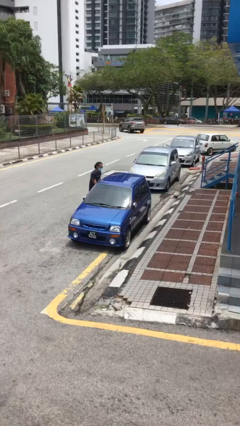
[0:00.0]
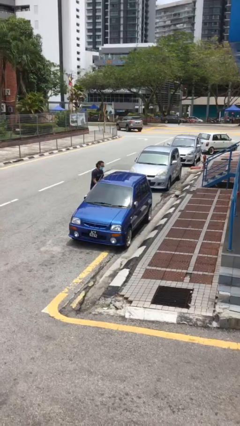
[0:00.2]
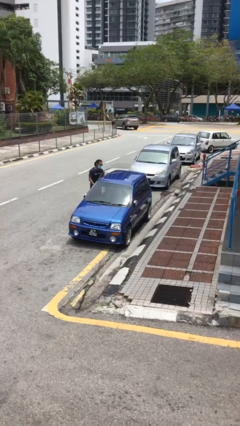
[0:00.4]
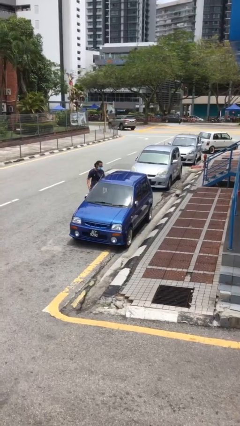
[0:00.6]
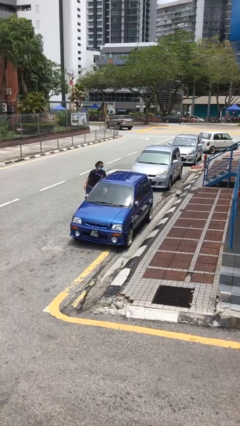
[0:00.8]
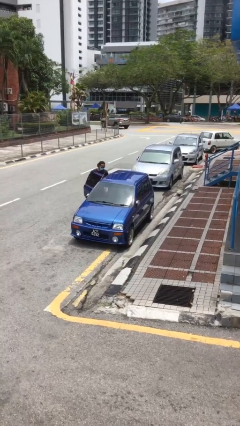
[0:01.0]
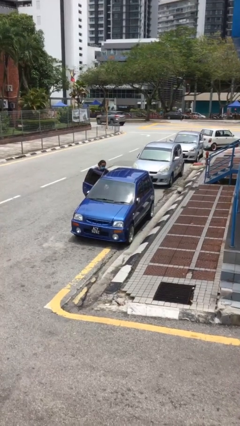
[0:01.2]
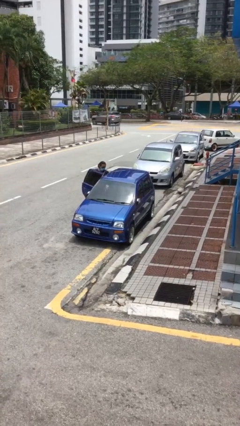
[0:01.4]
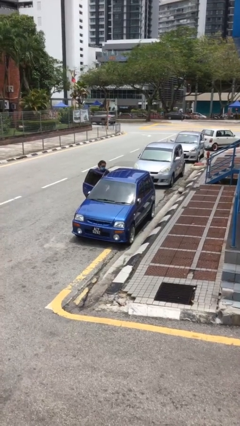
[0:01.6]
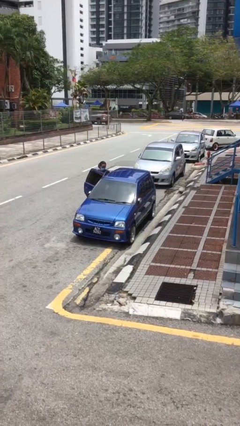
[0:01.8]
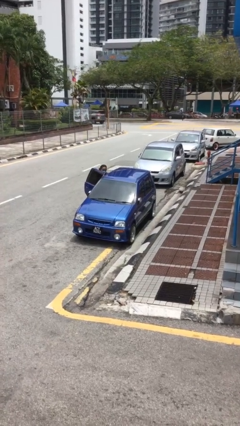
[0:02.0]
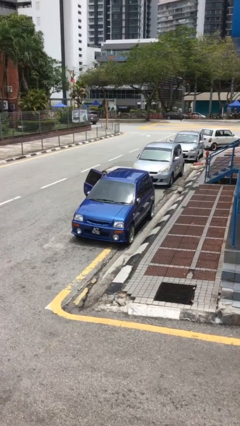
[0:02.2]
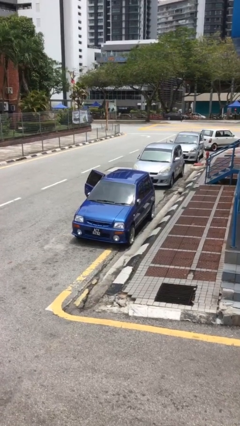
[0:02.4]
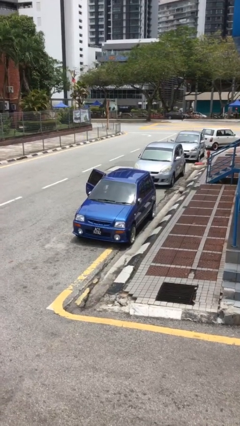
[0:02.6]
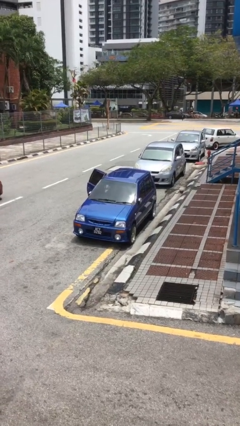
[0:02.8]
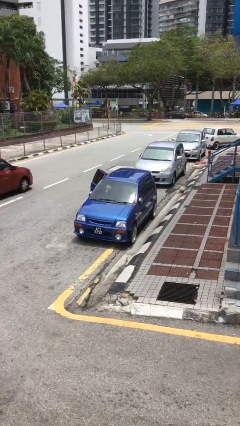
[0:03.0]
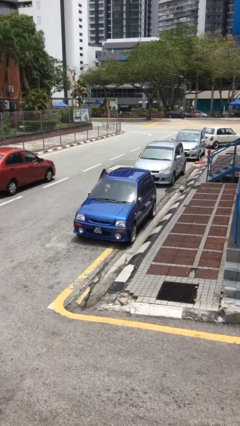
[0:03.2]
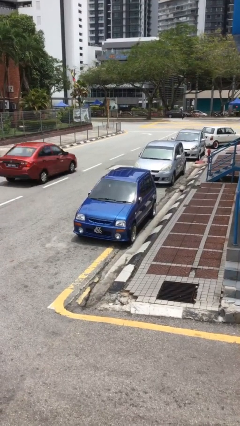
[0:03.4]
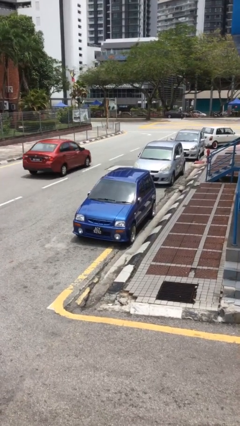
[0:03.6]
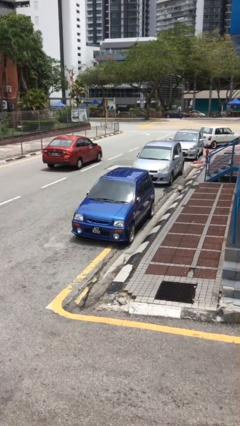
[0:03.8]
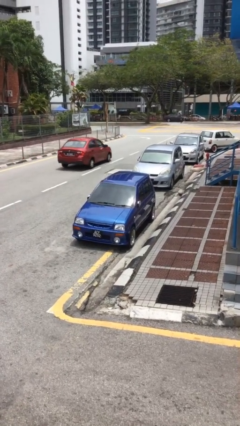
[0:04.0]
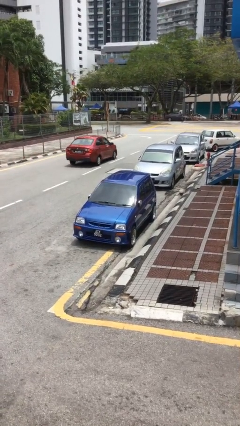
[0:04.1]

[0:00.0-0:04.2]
car picks up person

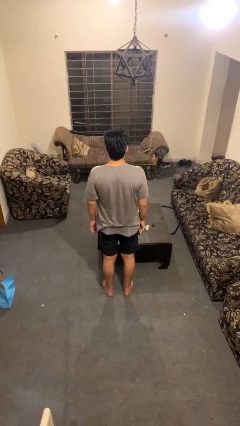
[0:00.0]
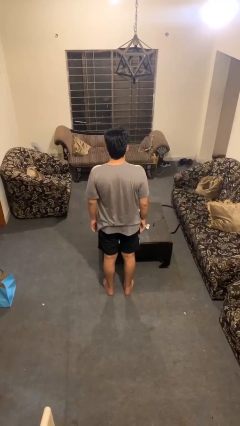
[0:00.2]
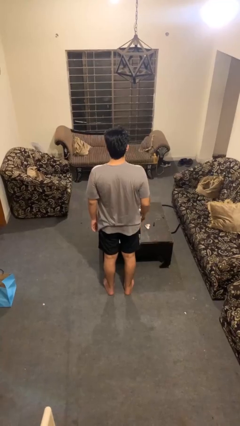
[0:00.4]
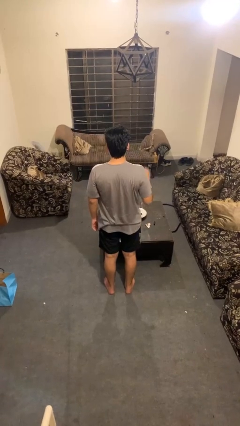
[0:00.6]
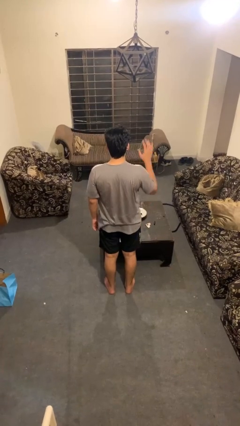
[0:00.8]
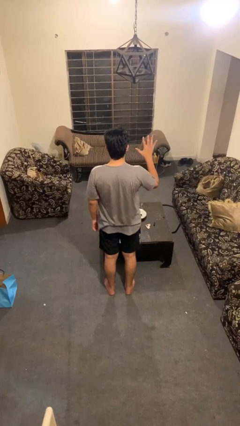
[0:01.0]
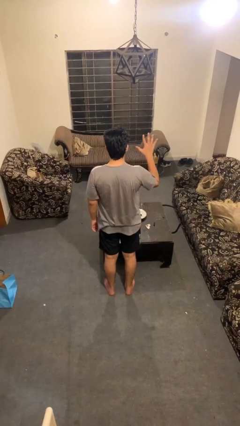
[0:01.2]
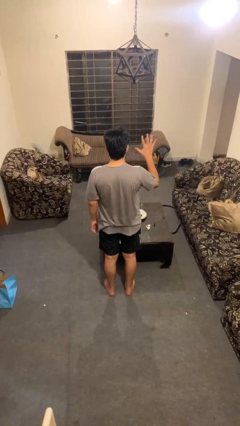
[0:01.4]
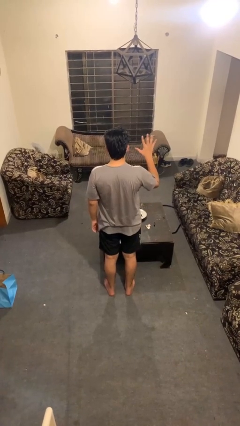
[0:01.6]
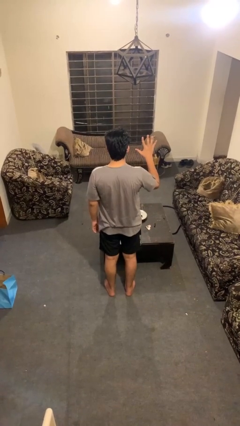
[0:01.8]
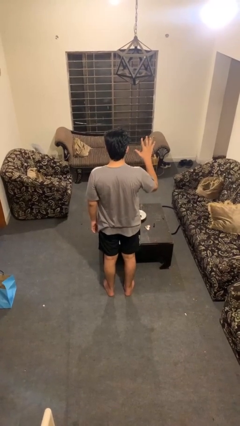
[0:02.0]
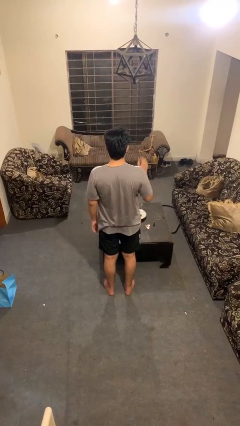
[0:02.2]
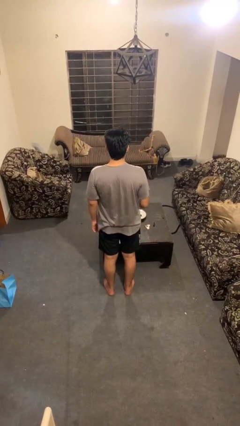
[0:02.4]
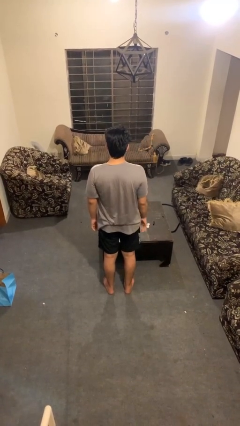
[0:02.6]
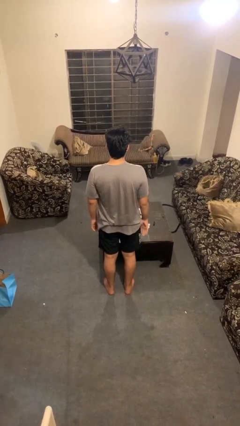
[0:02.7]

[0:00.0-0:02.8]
person gestures number five

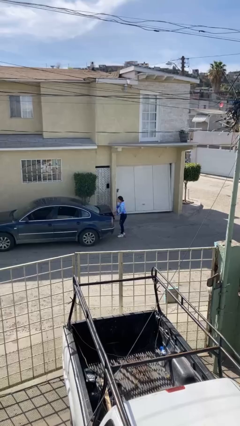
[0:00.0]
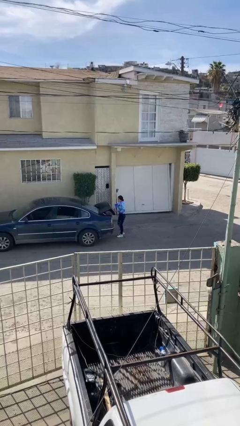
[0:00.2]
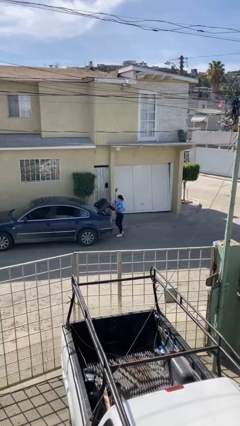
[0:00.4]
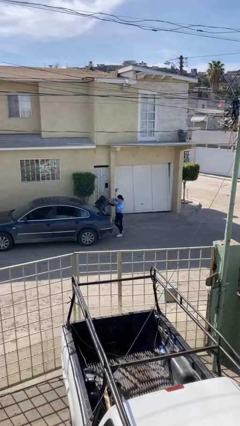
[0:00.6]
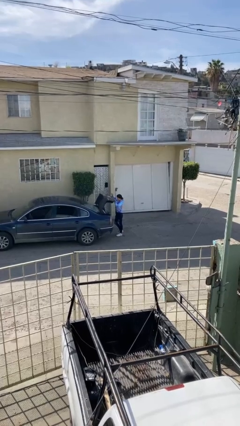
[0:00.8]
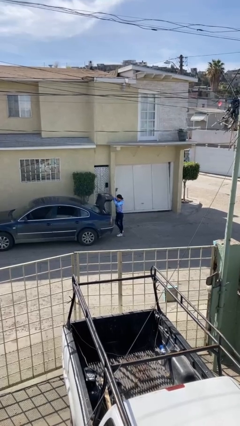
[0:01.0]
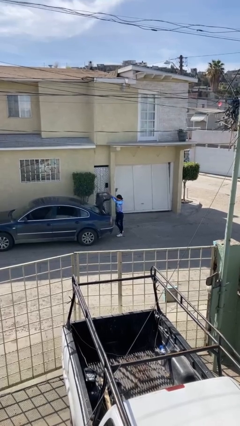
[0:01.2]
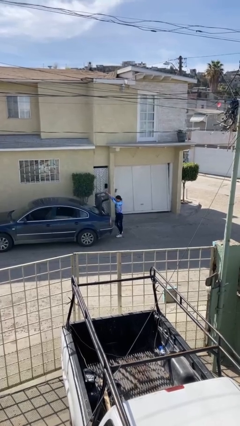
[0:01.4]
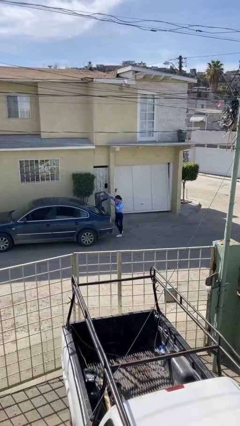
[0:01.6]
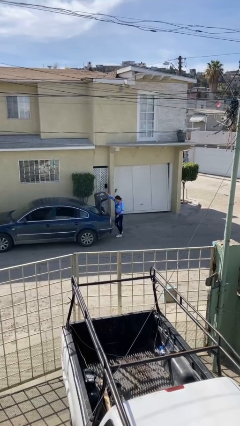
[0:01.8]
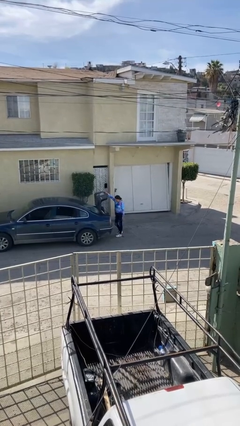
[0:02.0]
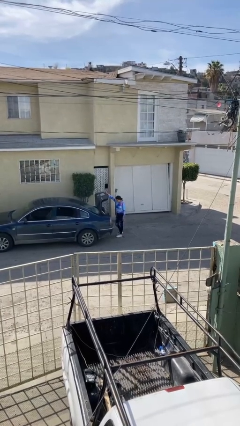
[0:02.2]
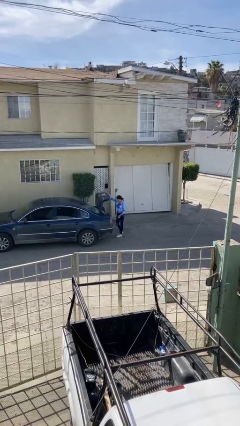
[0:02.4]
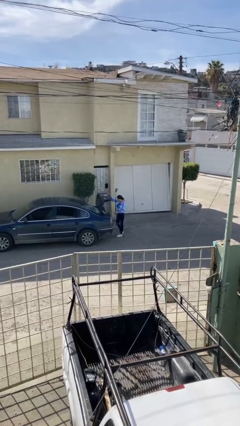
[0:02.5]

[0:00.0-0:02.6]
person opens car trunk

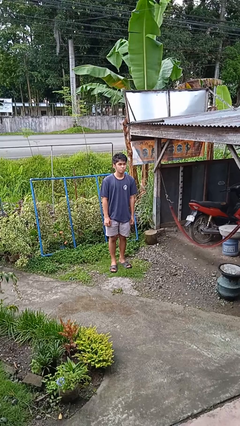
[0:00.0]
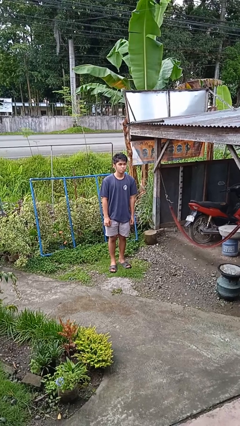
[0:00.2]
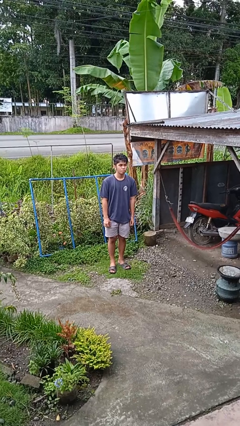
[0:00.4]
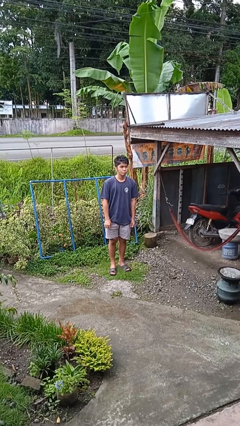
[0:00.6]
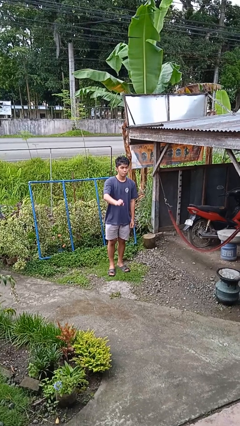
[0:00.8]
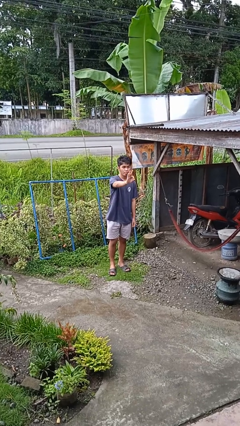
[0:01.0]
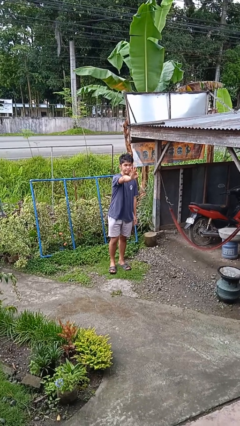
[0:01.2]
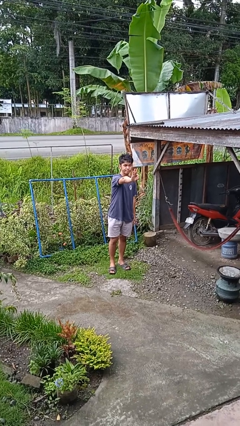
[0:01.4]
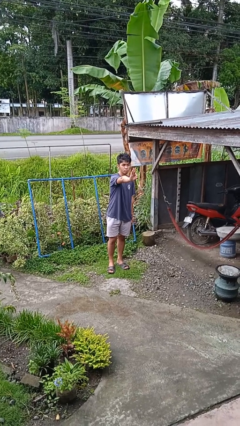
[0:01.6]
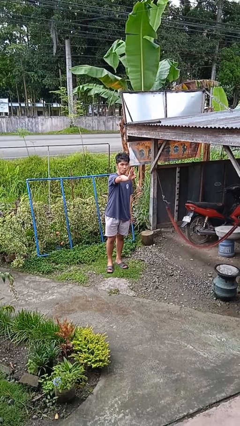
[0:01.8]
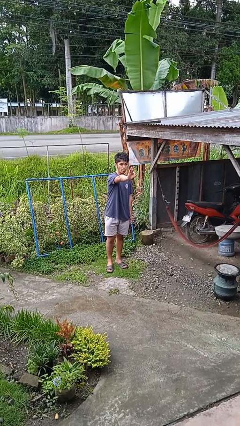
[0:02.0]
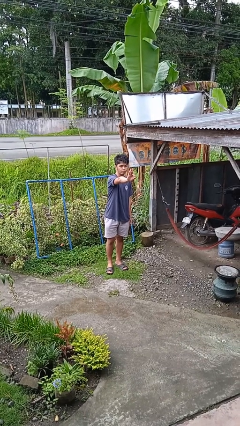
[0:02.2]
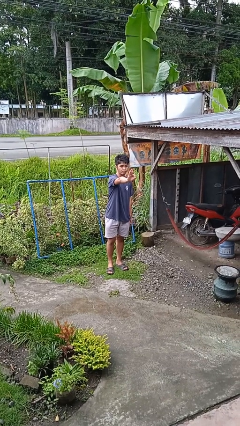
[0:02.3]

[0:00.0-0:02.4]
person gestures number three

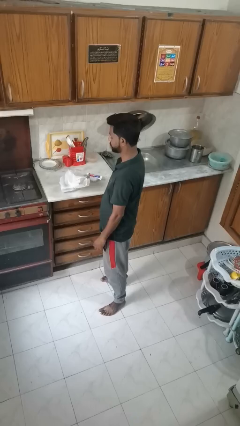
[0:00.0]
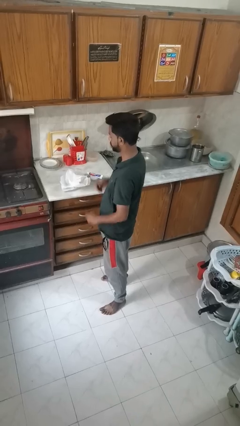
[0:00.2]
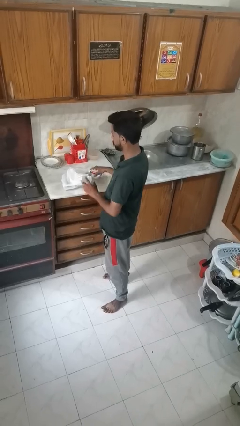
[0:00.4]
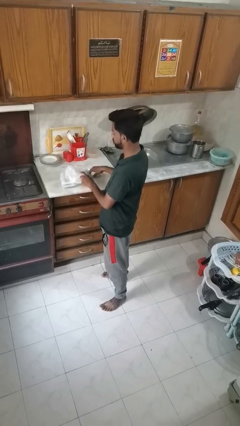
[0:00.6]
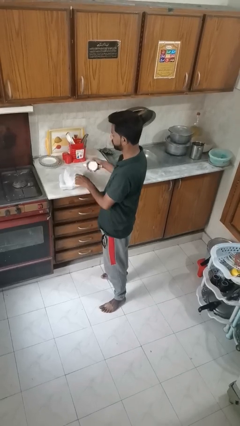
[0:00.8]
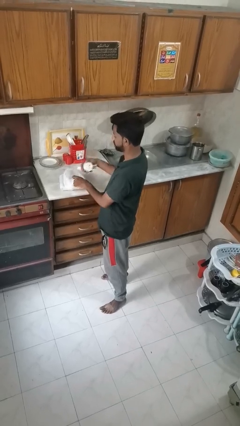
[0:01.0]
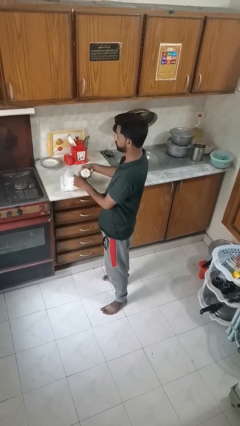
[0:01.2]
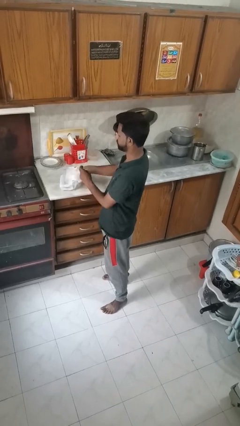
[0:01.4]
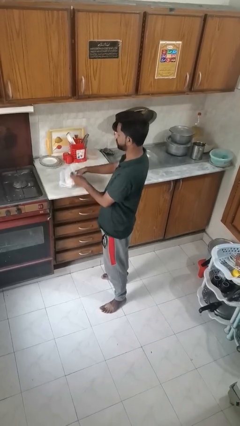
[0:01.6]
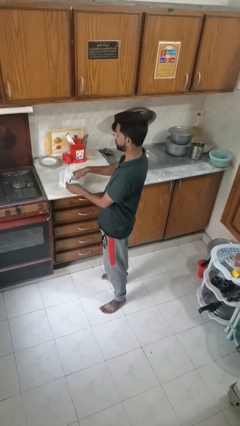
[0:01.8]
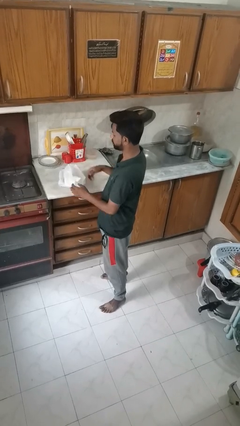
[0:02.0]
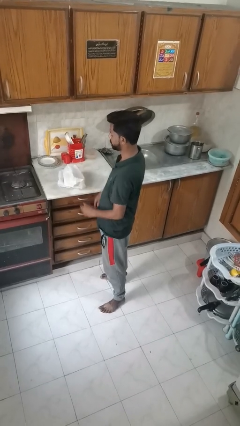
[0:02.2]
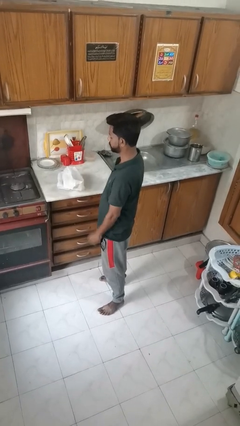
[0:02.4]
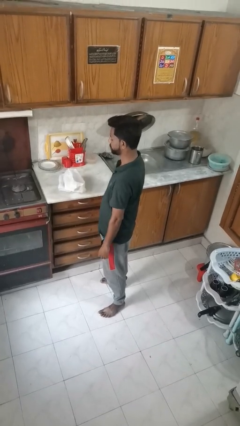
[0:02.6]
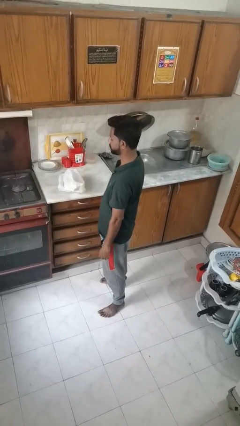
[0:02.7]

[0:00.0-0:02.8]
person puts object into bag

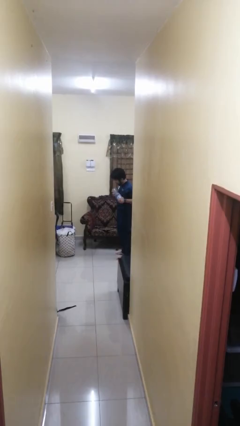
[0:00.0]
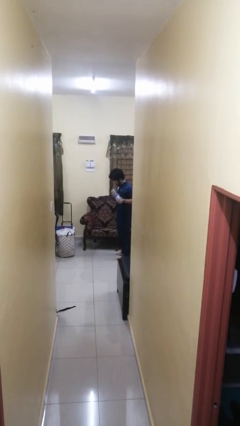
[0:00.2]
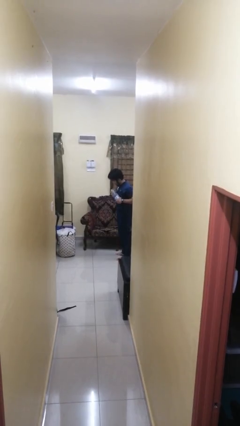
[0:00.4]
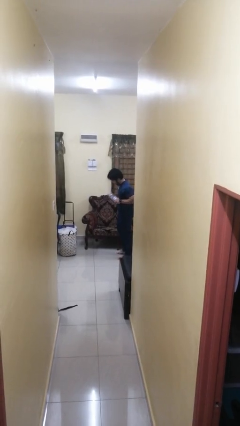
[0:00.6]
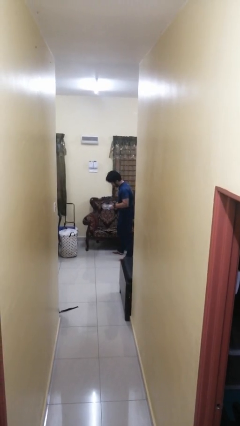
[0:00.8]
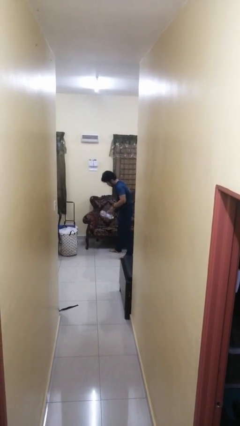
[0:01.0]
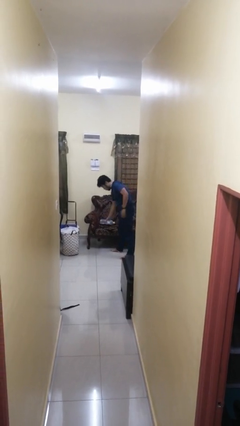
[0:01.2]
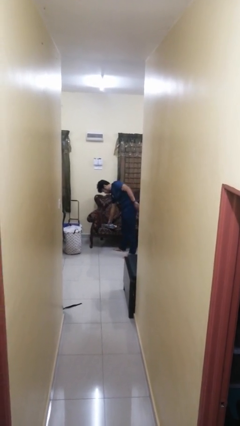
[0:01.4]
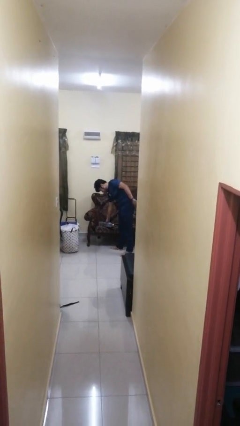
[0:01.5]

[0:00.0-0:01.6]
person puts down object on couch

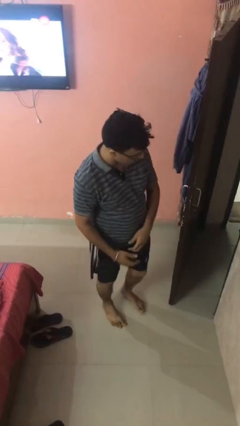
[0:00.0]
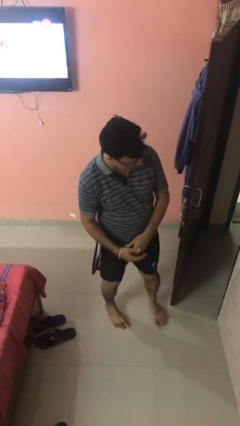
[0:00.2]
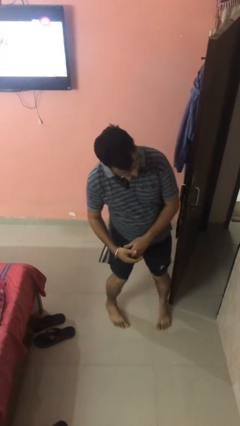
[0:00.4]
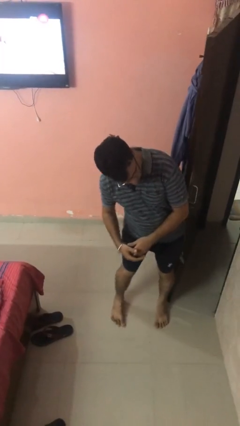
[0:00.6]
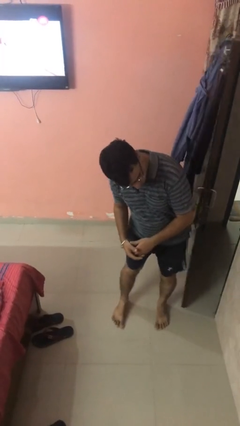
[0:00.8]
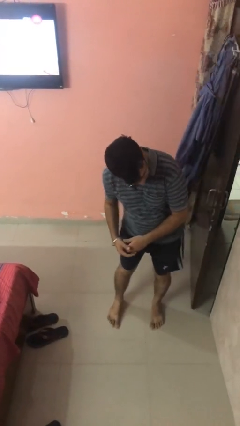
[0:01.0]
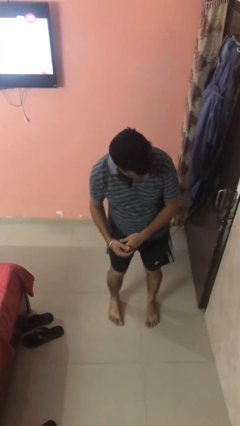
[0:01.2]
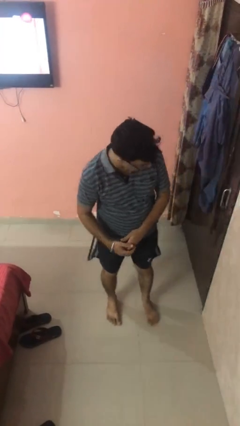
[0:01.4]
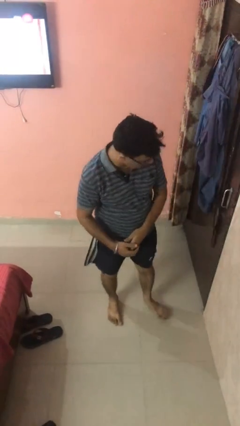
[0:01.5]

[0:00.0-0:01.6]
person closes door with hip
